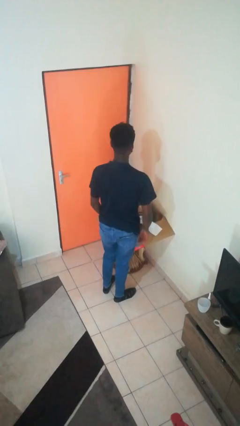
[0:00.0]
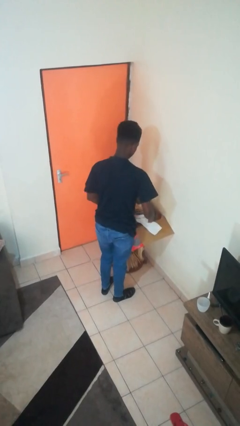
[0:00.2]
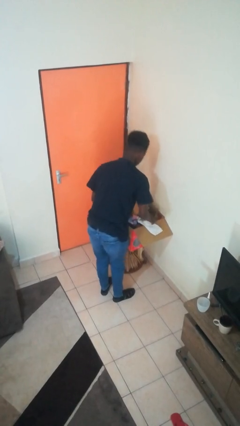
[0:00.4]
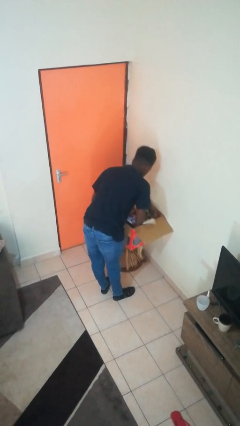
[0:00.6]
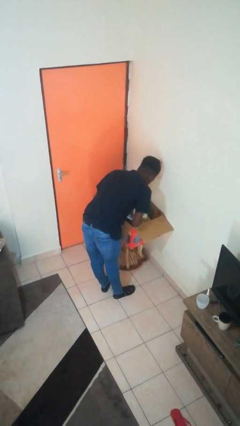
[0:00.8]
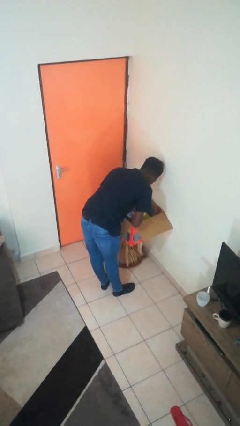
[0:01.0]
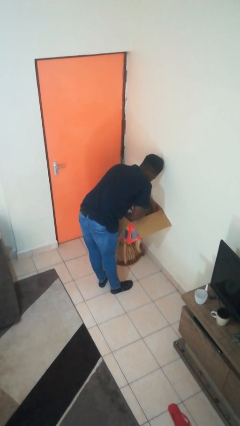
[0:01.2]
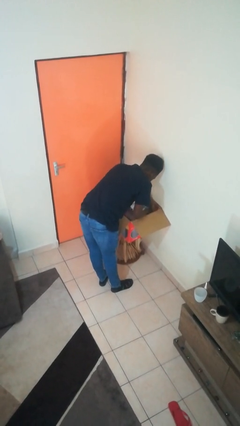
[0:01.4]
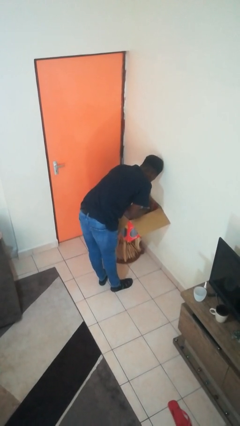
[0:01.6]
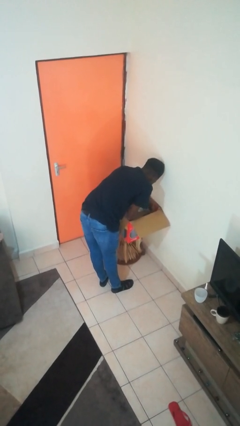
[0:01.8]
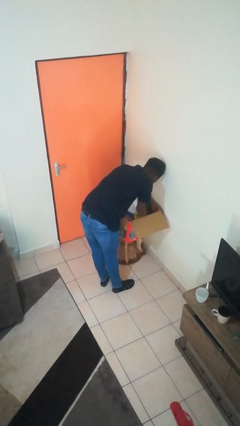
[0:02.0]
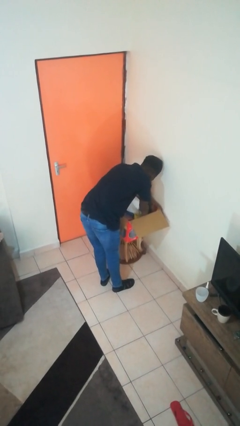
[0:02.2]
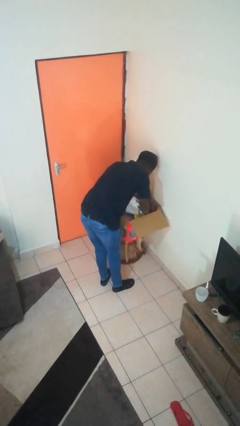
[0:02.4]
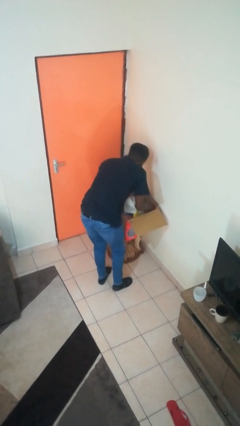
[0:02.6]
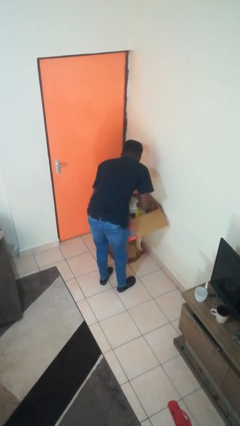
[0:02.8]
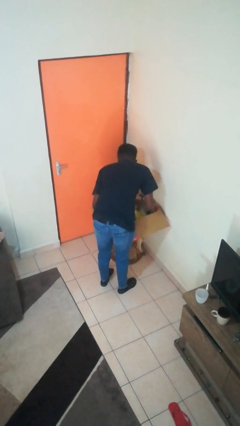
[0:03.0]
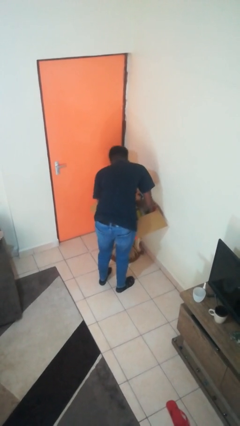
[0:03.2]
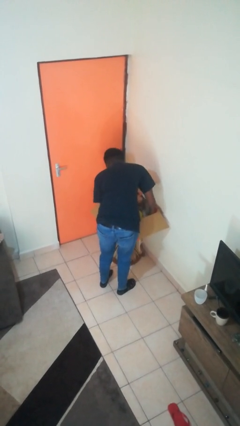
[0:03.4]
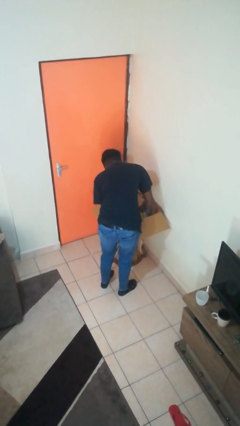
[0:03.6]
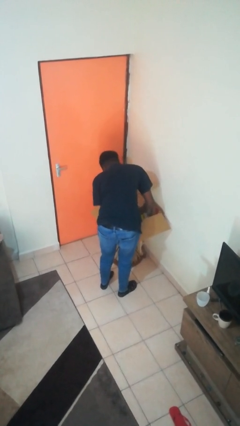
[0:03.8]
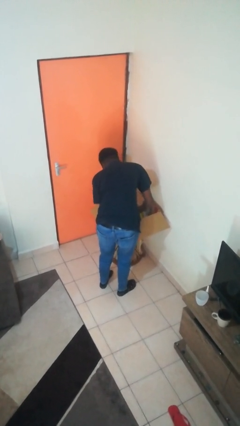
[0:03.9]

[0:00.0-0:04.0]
person searches in box

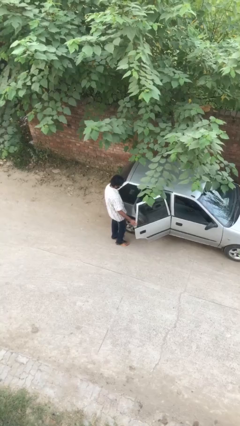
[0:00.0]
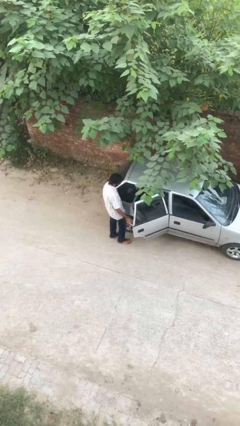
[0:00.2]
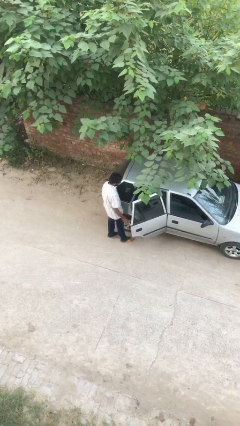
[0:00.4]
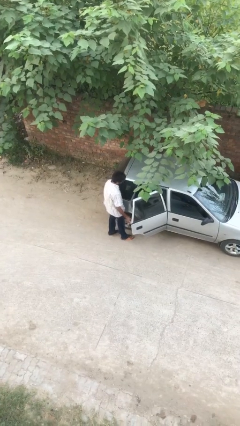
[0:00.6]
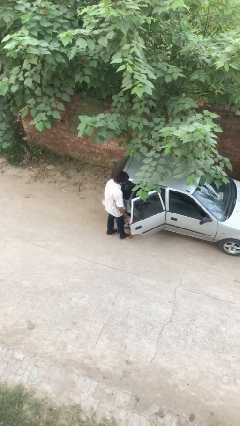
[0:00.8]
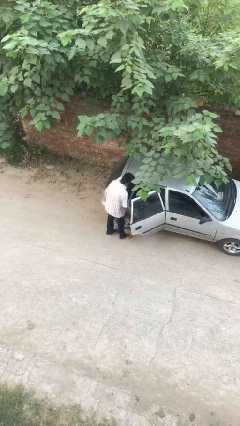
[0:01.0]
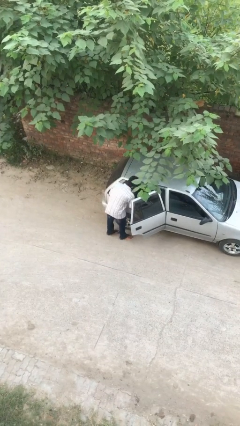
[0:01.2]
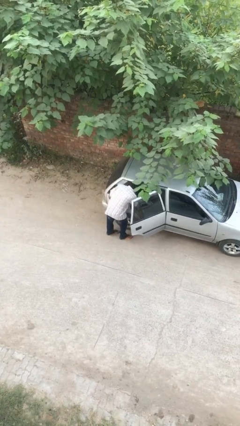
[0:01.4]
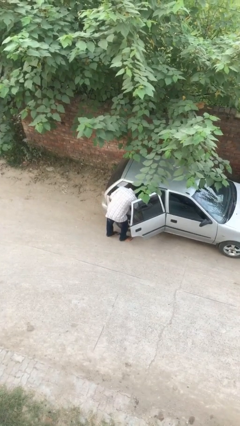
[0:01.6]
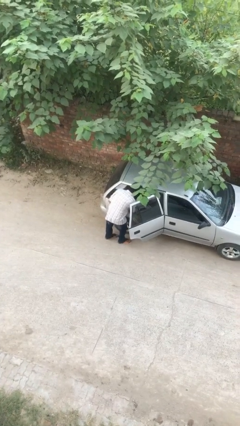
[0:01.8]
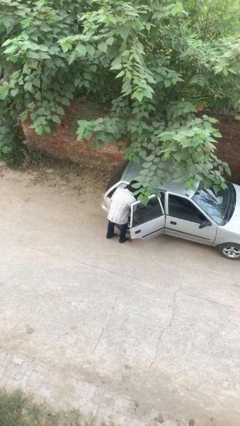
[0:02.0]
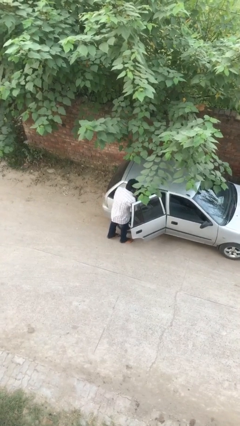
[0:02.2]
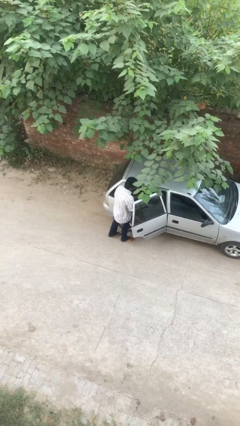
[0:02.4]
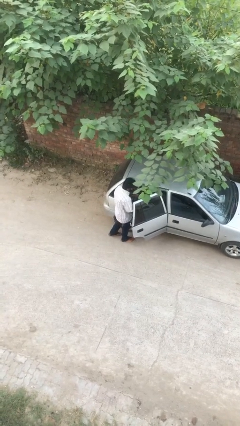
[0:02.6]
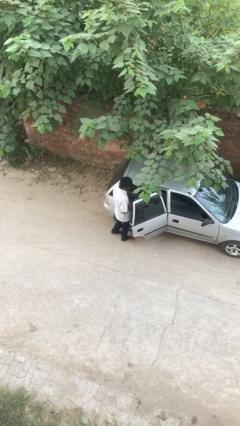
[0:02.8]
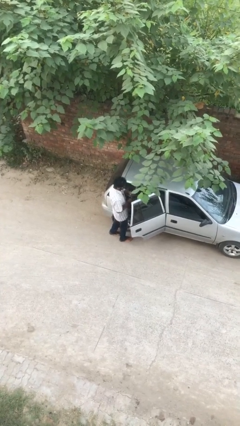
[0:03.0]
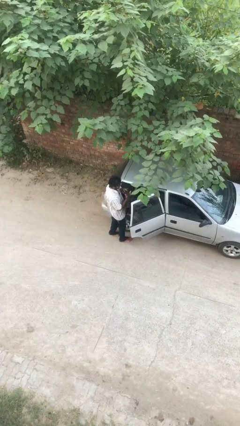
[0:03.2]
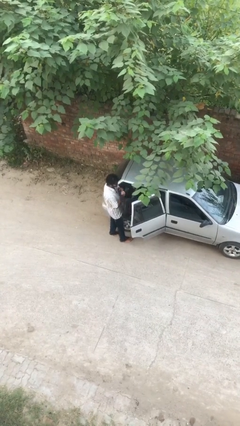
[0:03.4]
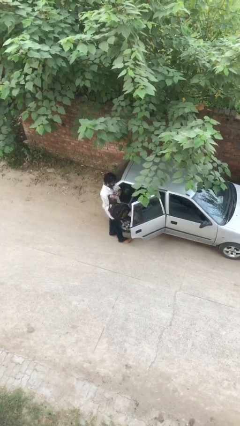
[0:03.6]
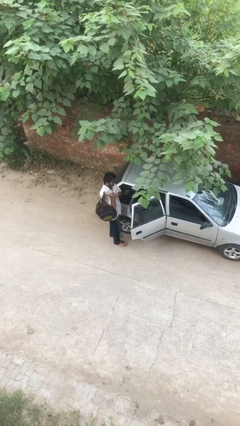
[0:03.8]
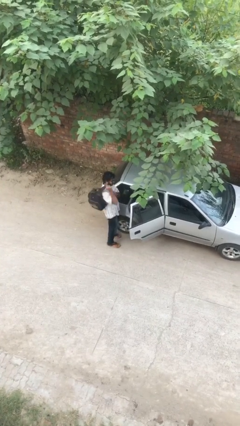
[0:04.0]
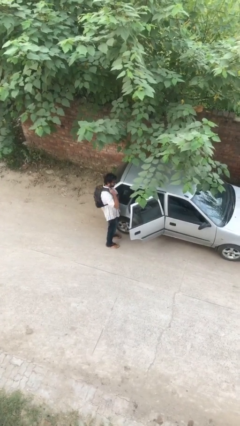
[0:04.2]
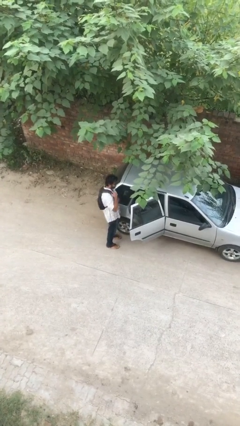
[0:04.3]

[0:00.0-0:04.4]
person unloads car

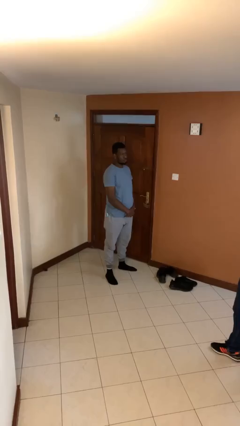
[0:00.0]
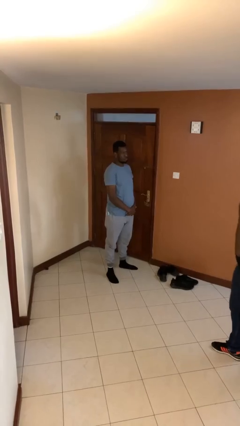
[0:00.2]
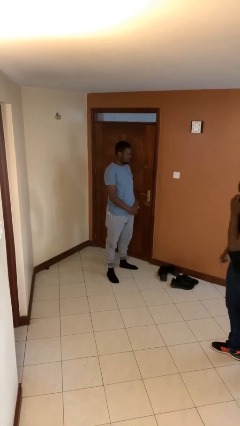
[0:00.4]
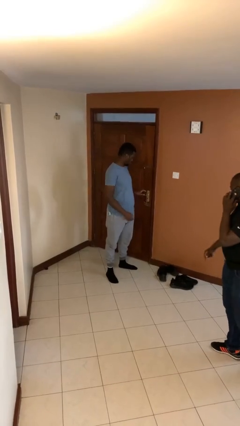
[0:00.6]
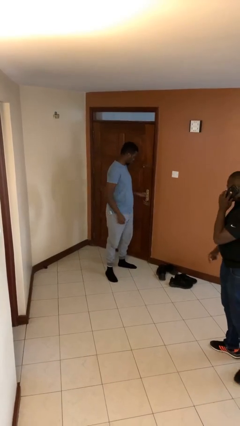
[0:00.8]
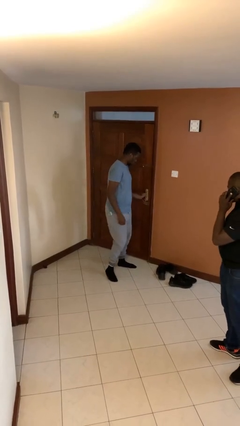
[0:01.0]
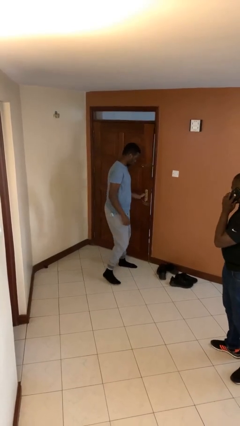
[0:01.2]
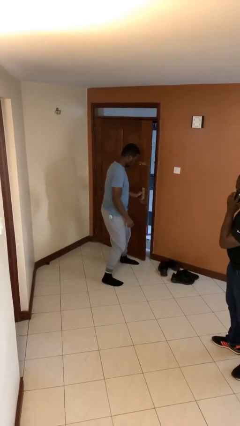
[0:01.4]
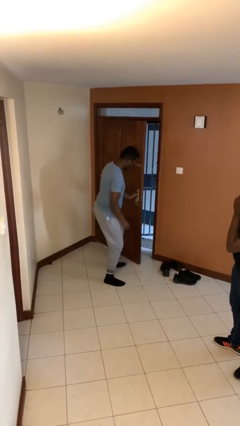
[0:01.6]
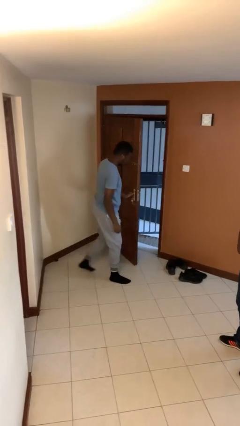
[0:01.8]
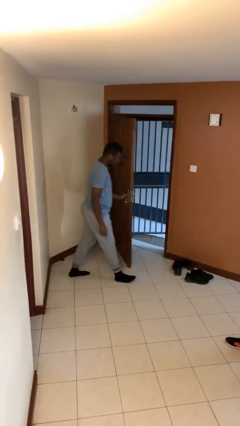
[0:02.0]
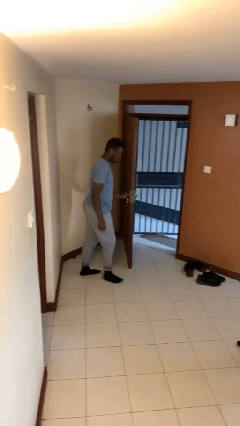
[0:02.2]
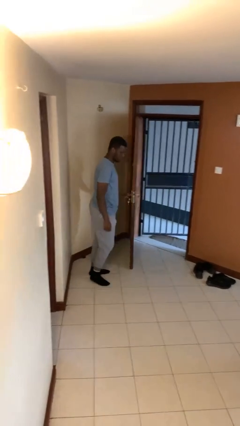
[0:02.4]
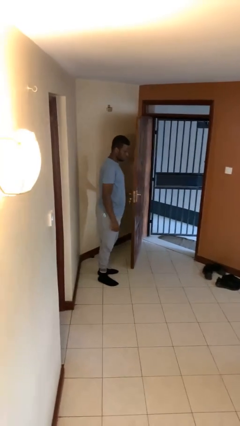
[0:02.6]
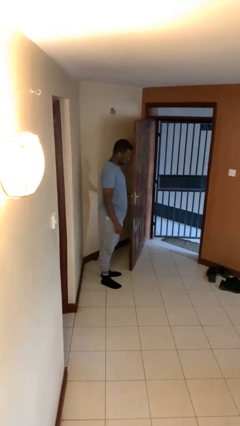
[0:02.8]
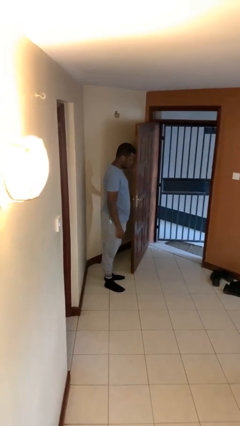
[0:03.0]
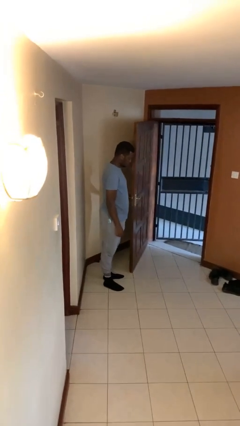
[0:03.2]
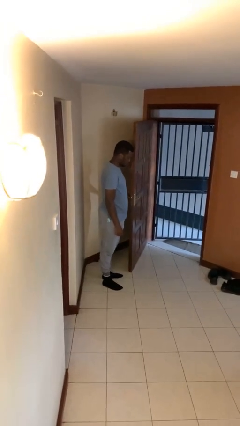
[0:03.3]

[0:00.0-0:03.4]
person opens facility door

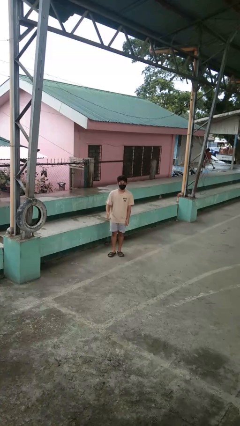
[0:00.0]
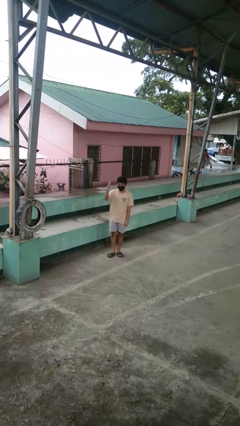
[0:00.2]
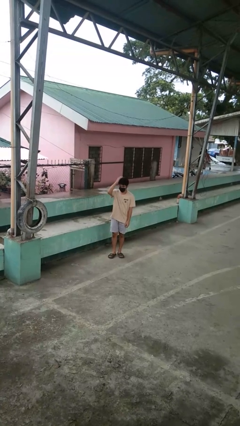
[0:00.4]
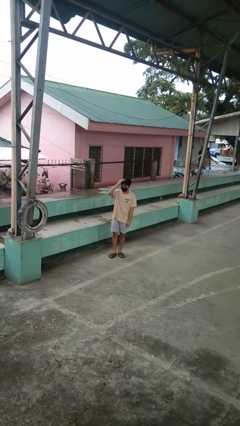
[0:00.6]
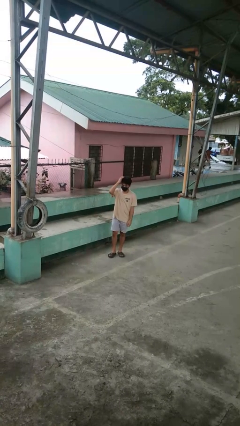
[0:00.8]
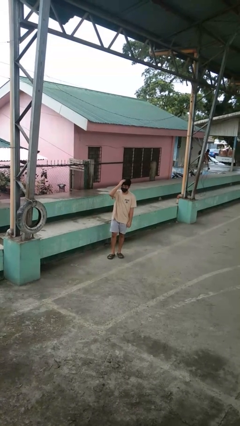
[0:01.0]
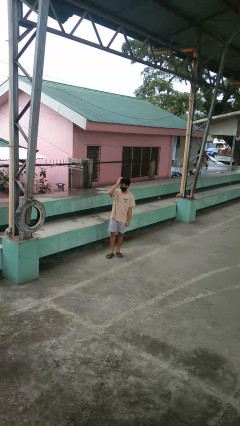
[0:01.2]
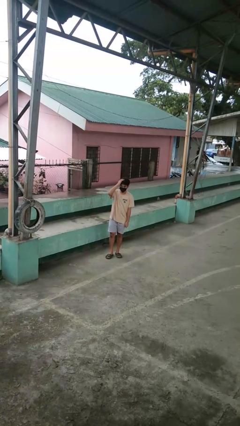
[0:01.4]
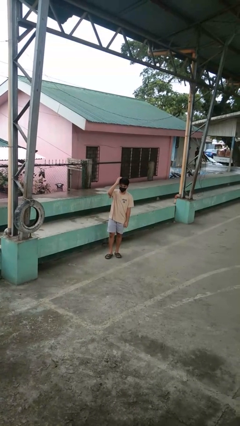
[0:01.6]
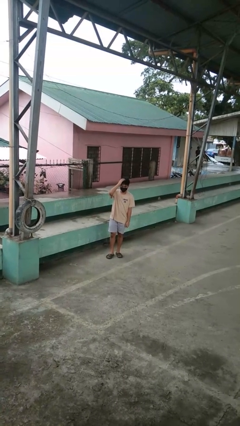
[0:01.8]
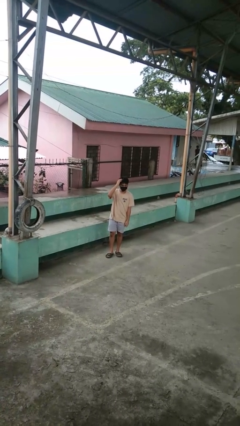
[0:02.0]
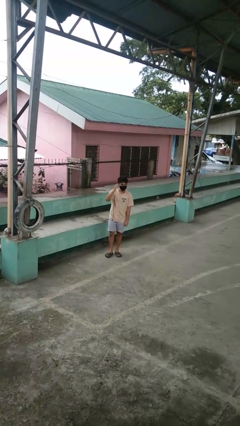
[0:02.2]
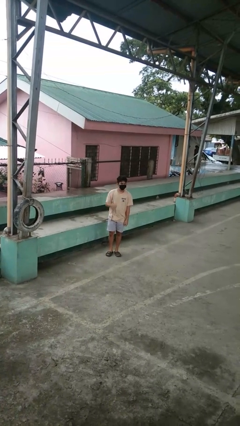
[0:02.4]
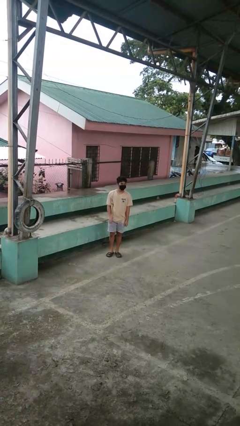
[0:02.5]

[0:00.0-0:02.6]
person pats head

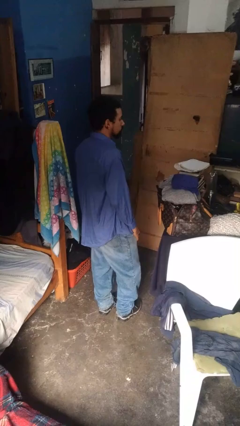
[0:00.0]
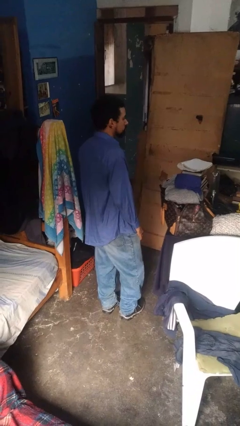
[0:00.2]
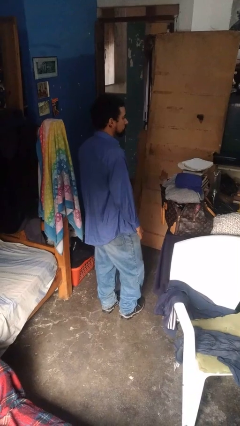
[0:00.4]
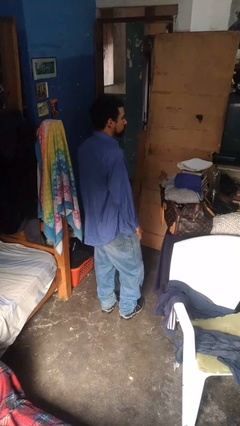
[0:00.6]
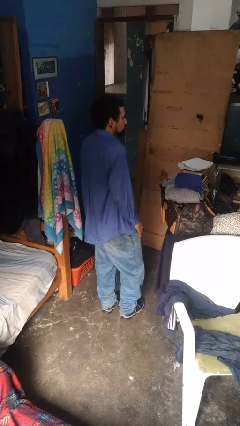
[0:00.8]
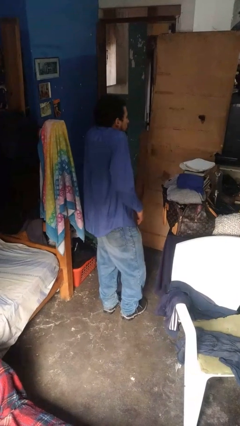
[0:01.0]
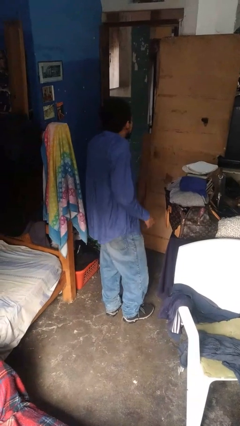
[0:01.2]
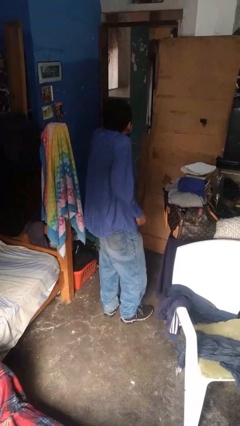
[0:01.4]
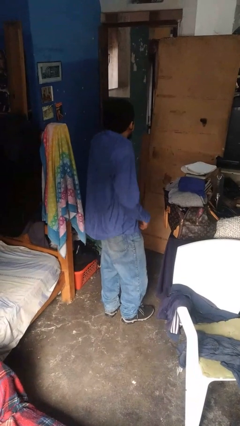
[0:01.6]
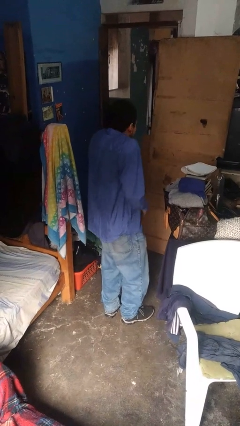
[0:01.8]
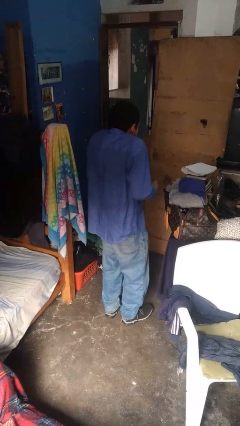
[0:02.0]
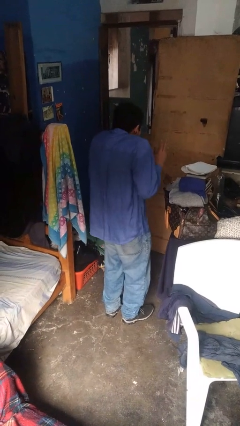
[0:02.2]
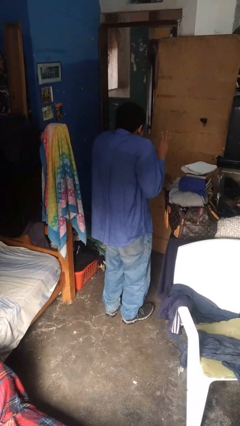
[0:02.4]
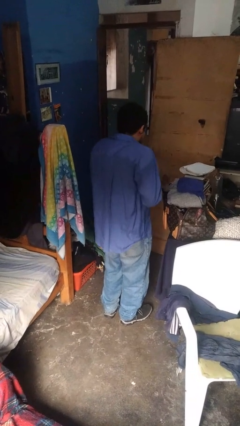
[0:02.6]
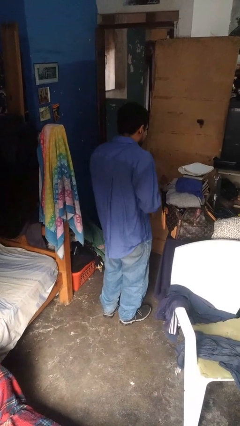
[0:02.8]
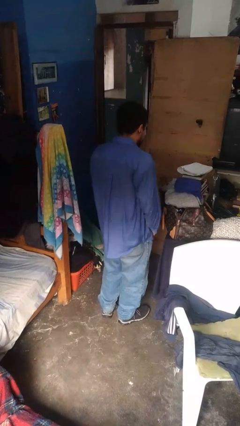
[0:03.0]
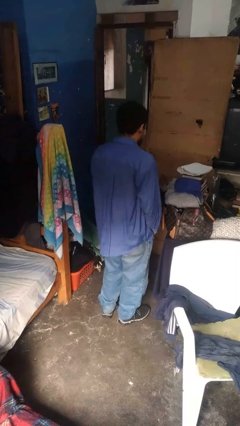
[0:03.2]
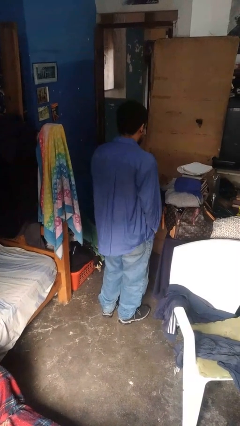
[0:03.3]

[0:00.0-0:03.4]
person shrugs
